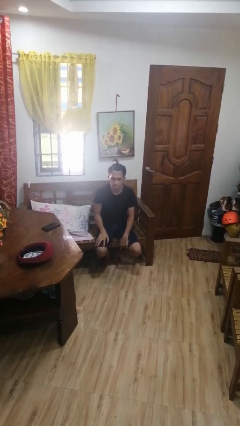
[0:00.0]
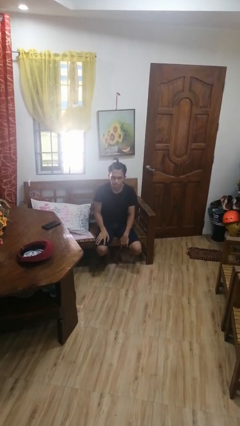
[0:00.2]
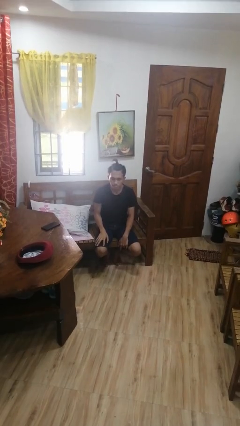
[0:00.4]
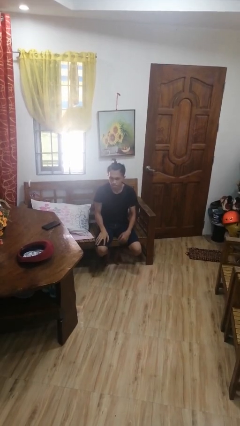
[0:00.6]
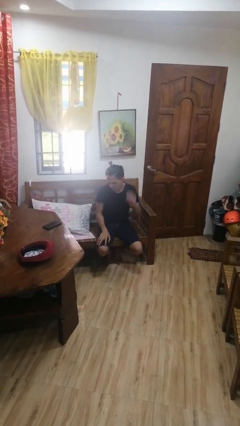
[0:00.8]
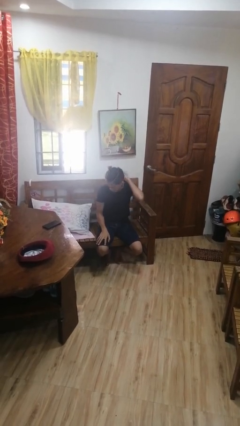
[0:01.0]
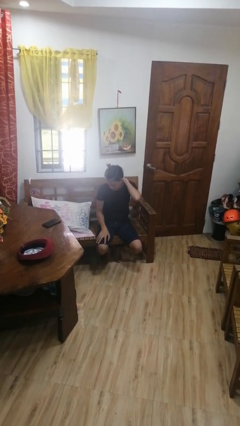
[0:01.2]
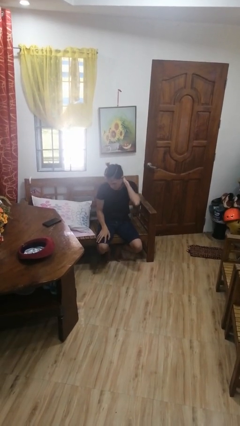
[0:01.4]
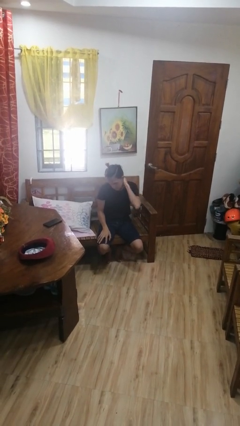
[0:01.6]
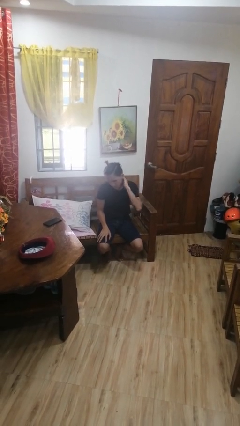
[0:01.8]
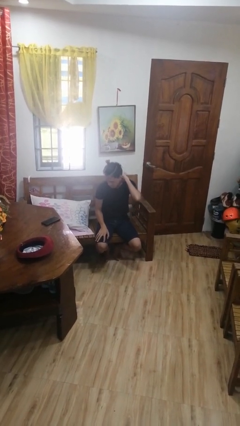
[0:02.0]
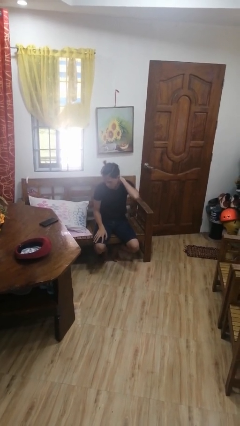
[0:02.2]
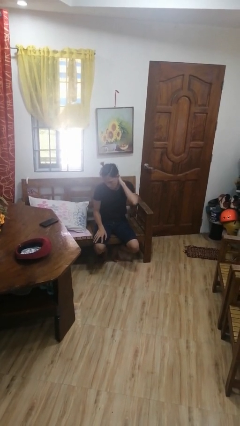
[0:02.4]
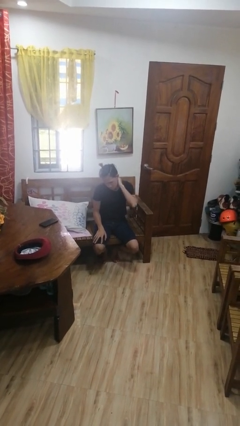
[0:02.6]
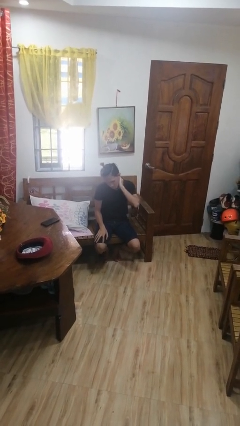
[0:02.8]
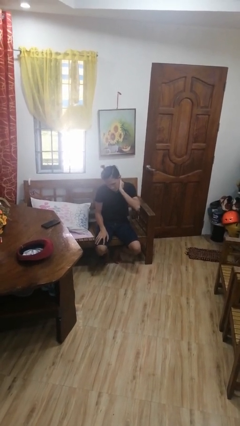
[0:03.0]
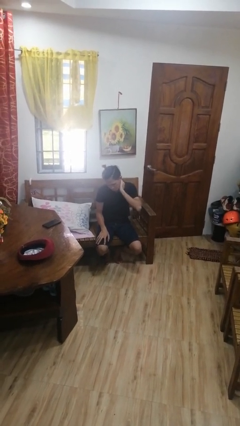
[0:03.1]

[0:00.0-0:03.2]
person rubs neck

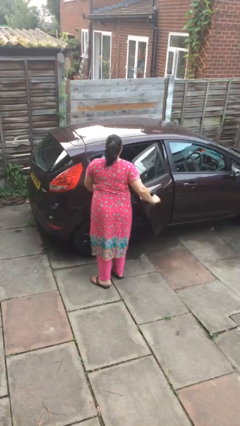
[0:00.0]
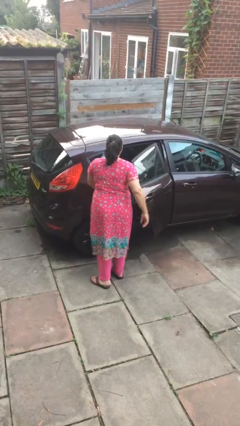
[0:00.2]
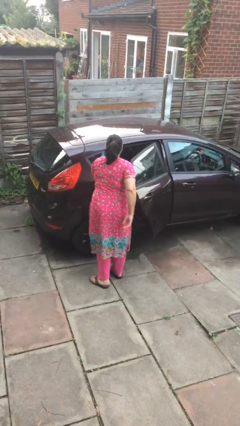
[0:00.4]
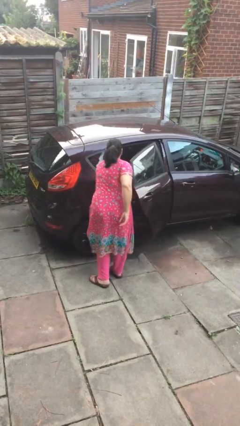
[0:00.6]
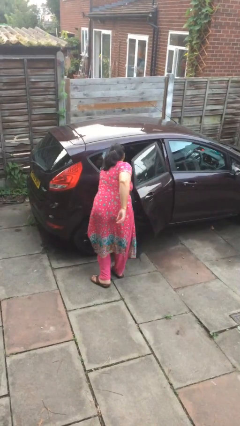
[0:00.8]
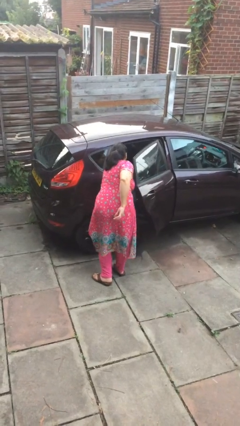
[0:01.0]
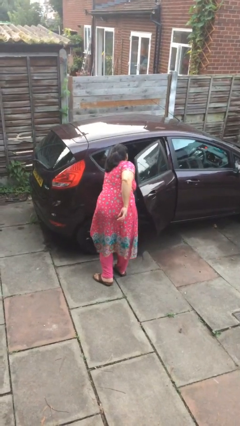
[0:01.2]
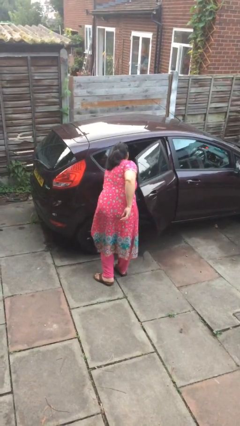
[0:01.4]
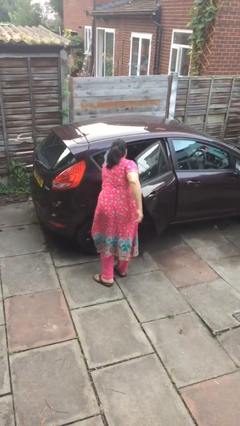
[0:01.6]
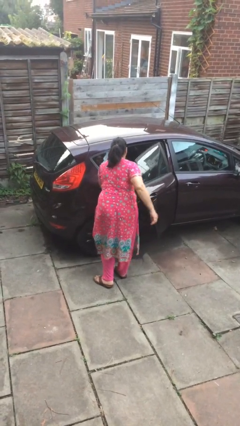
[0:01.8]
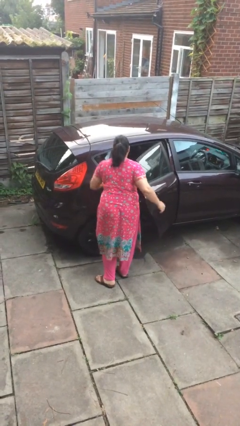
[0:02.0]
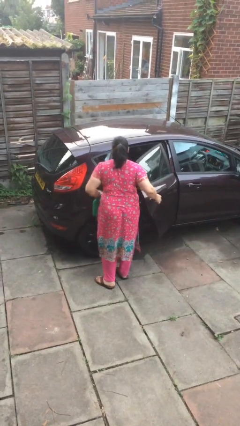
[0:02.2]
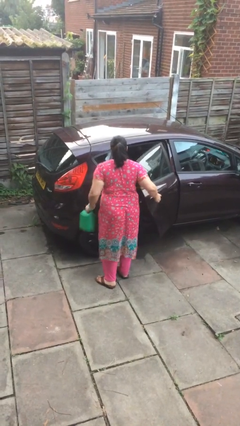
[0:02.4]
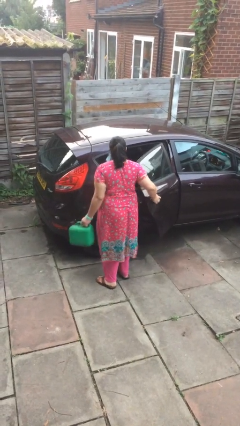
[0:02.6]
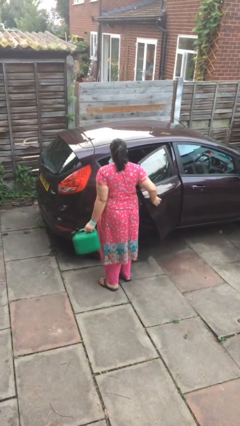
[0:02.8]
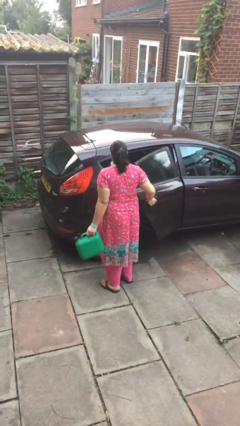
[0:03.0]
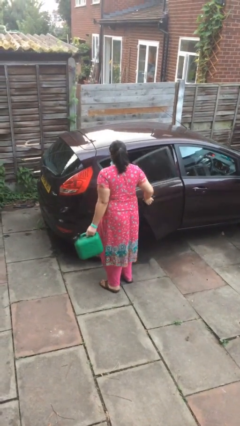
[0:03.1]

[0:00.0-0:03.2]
person unloads car

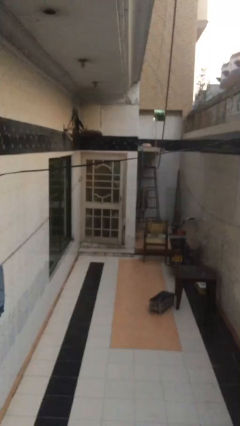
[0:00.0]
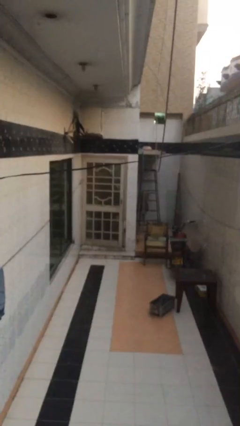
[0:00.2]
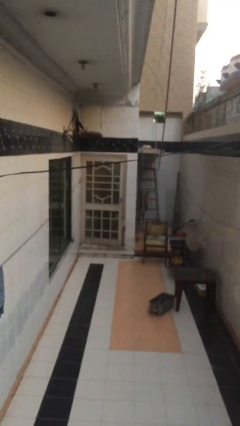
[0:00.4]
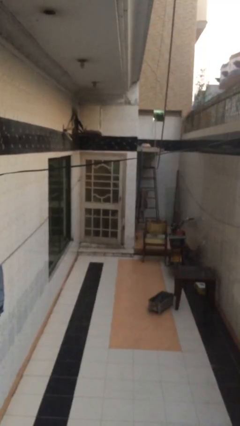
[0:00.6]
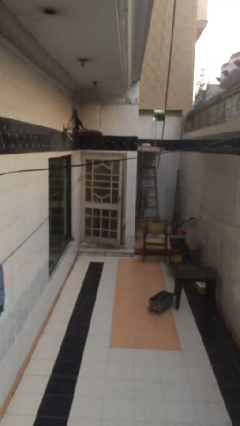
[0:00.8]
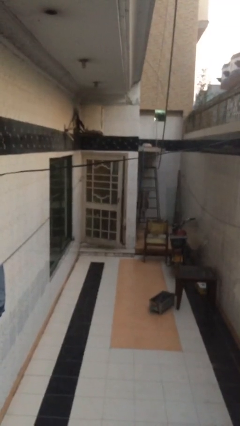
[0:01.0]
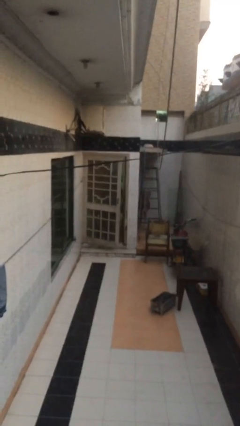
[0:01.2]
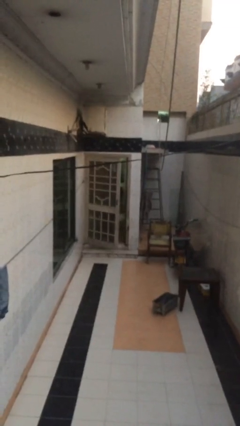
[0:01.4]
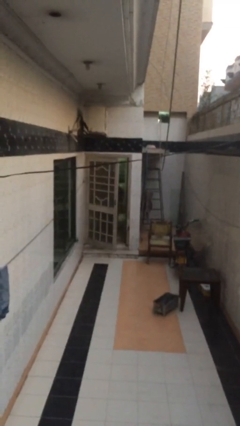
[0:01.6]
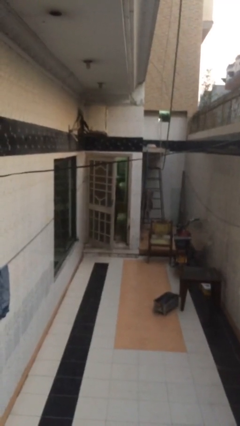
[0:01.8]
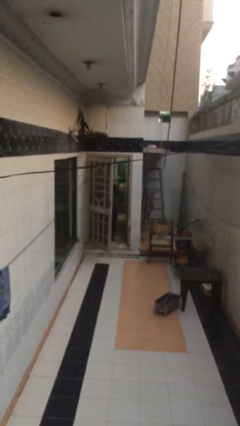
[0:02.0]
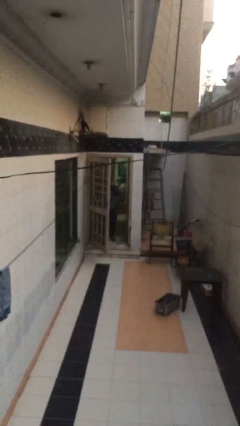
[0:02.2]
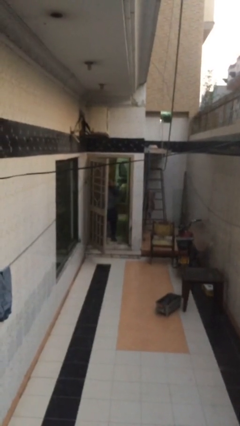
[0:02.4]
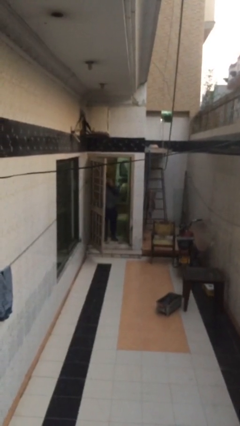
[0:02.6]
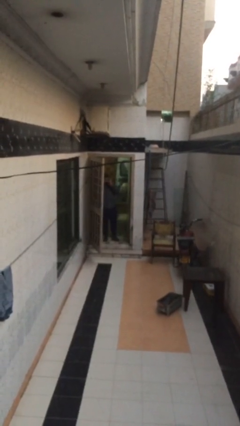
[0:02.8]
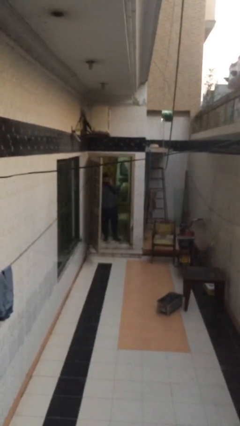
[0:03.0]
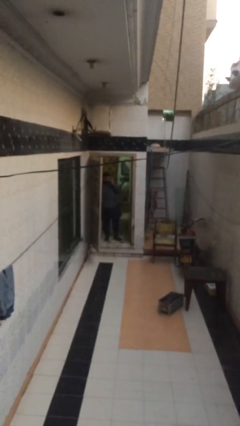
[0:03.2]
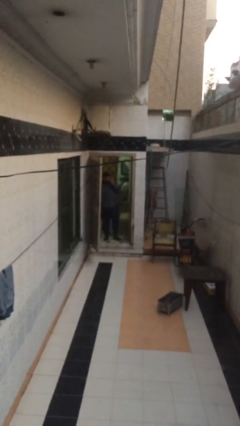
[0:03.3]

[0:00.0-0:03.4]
person opens facility door

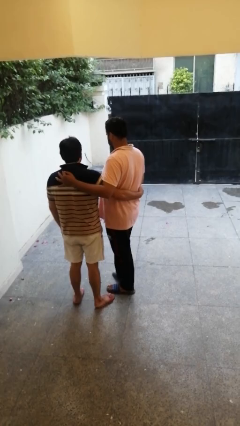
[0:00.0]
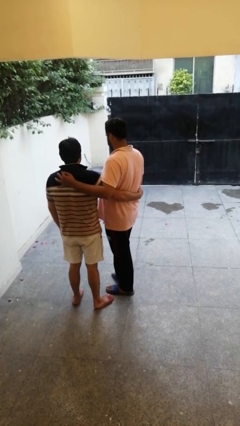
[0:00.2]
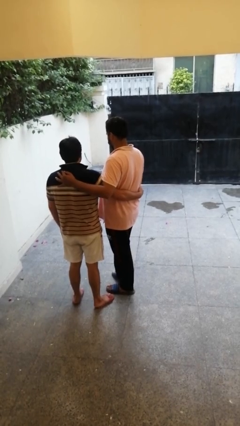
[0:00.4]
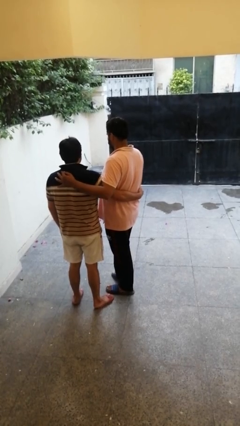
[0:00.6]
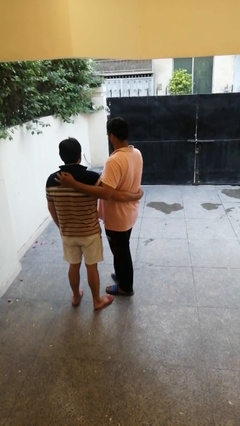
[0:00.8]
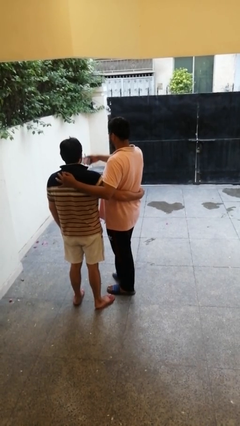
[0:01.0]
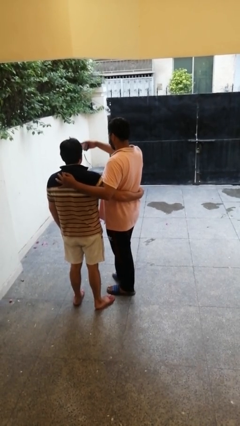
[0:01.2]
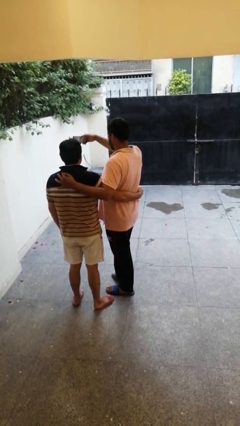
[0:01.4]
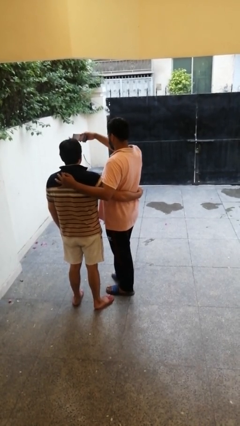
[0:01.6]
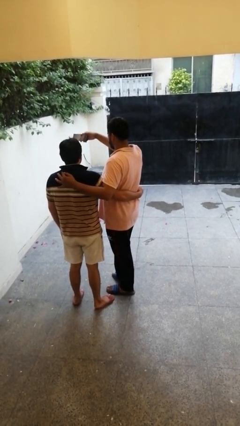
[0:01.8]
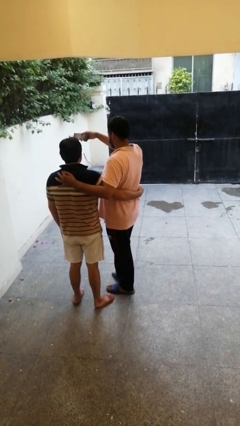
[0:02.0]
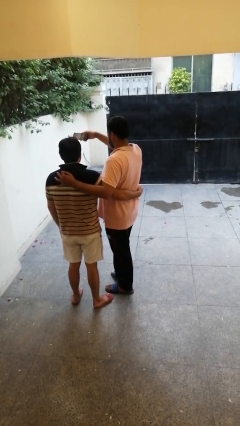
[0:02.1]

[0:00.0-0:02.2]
person takes selfie with person

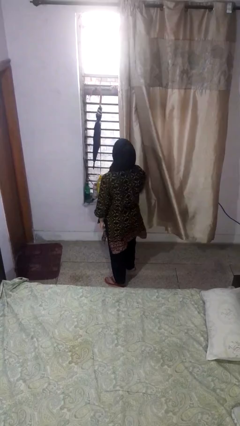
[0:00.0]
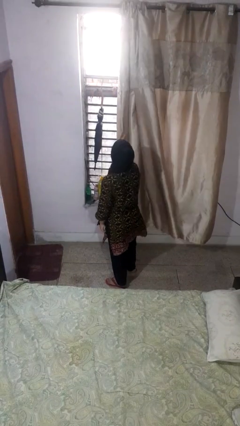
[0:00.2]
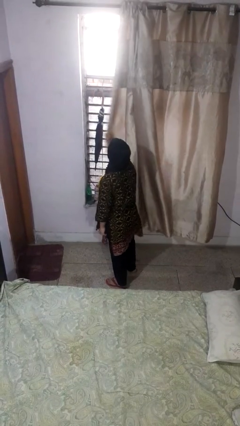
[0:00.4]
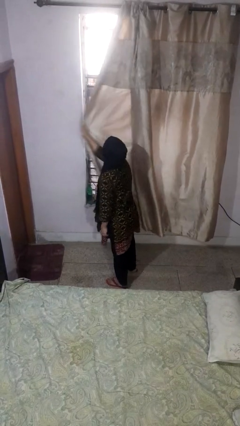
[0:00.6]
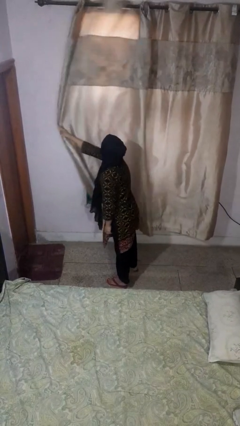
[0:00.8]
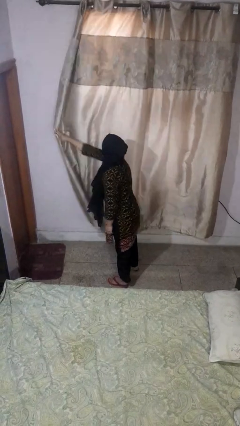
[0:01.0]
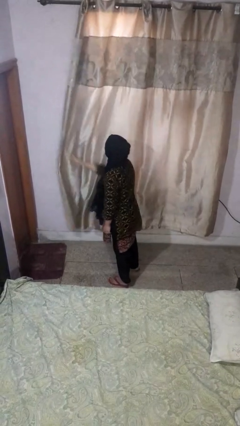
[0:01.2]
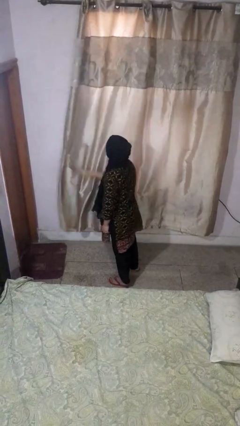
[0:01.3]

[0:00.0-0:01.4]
person closes curtains

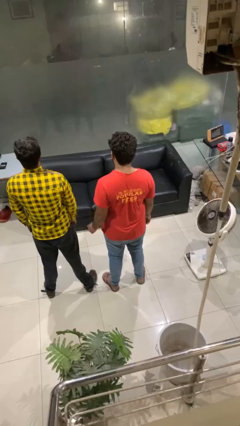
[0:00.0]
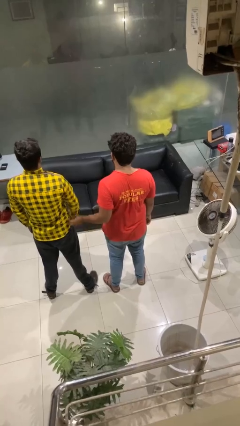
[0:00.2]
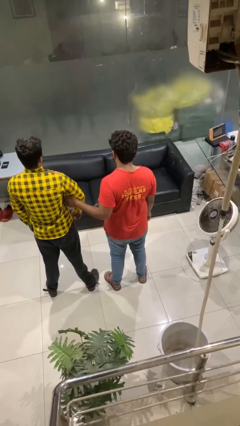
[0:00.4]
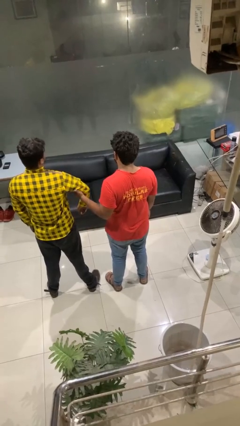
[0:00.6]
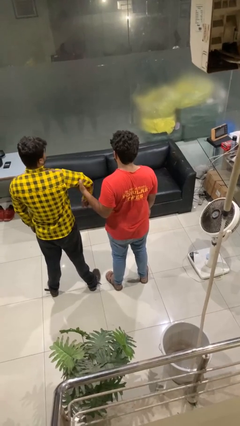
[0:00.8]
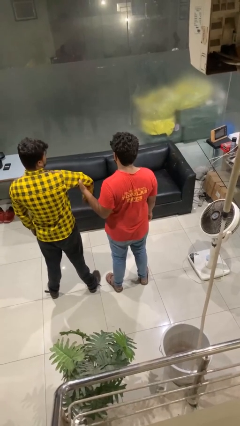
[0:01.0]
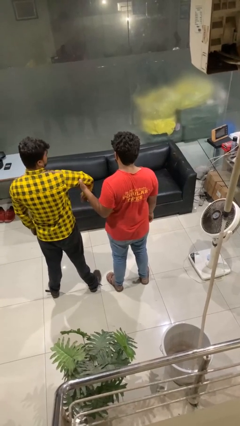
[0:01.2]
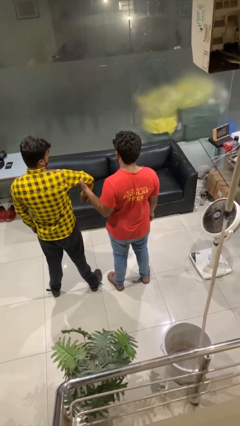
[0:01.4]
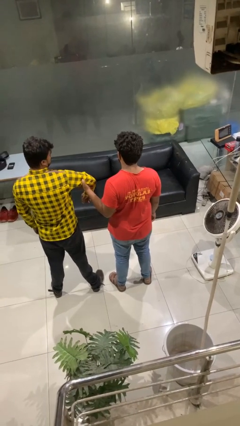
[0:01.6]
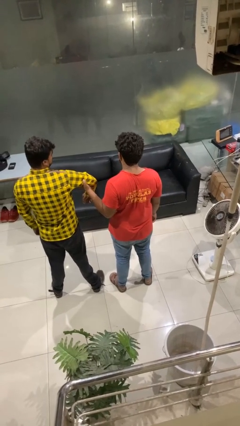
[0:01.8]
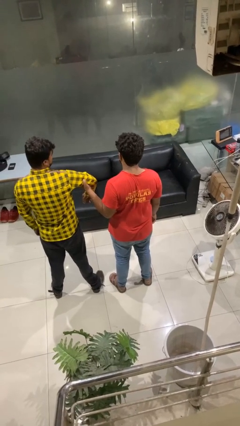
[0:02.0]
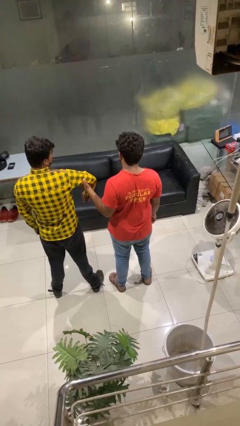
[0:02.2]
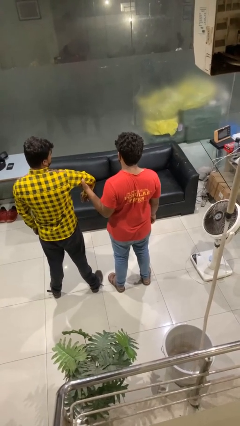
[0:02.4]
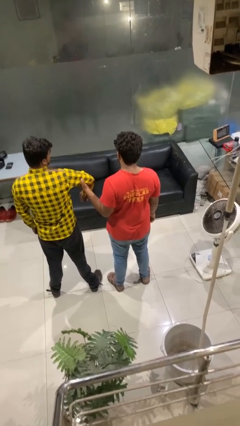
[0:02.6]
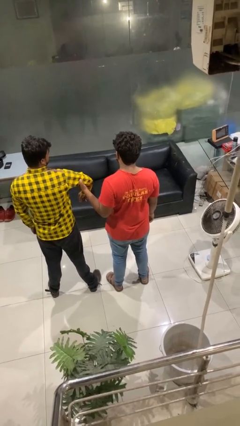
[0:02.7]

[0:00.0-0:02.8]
person grabs person by bicep

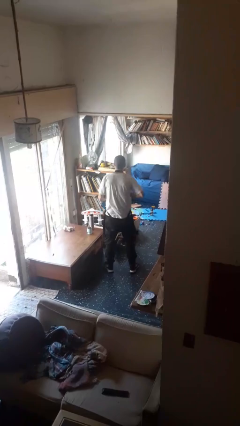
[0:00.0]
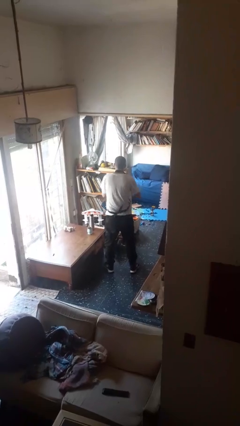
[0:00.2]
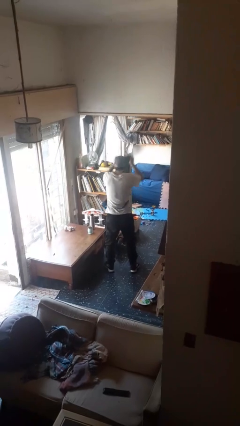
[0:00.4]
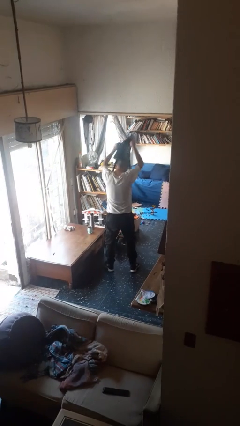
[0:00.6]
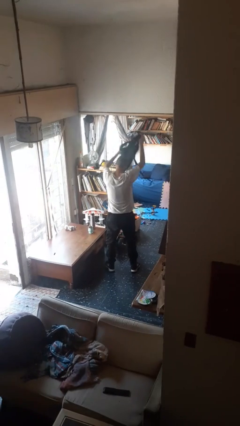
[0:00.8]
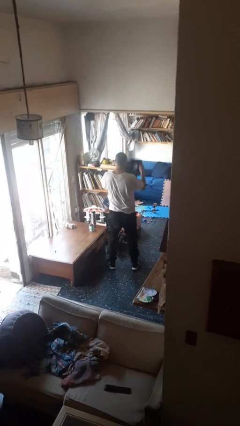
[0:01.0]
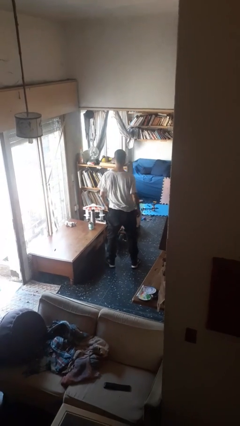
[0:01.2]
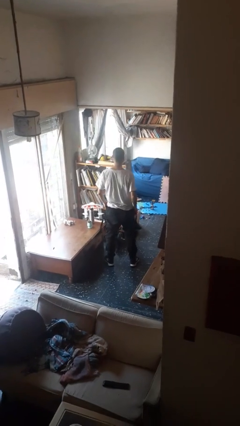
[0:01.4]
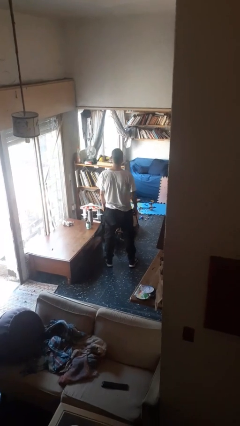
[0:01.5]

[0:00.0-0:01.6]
person takes off apron
